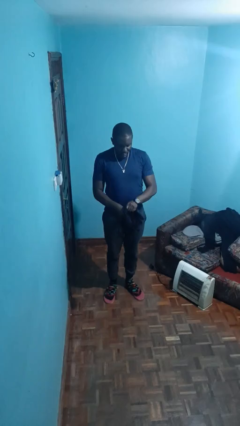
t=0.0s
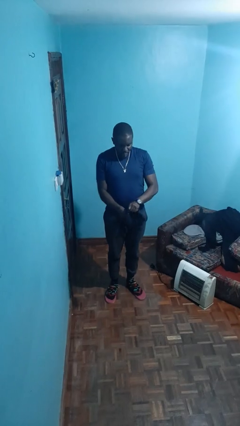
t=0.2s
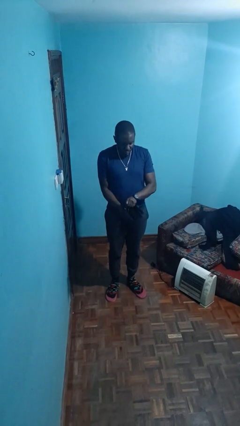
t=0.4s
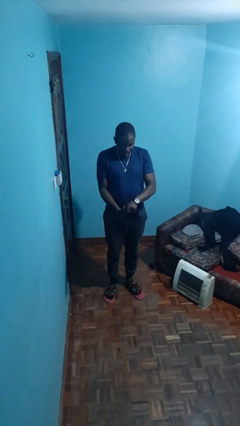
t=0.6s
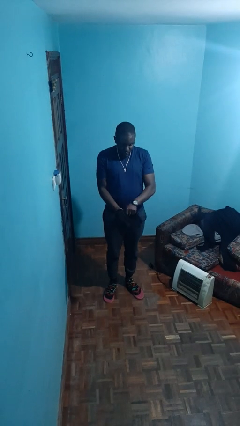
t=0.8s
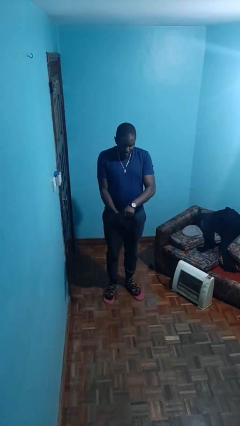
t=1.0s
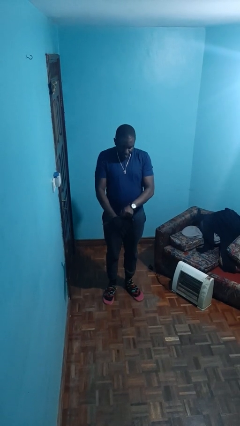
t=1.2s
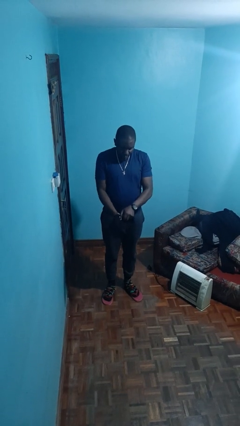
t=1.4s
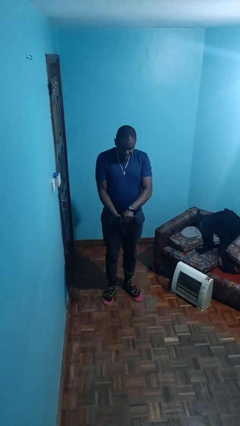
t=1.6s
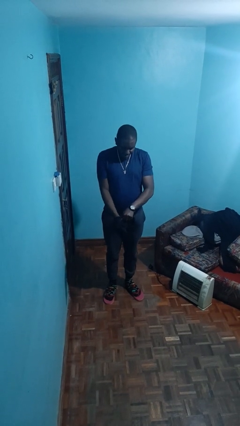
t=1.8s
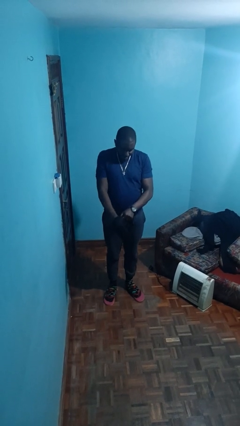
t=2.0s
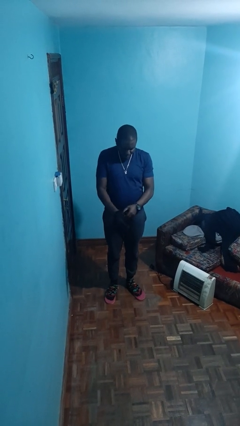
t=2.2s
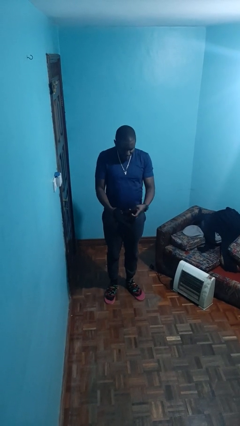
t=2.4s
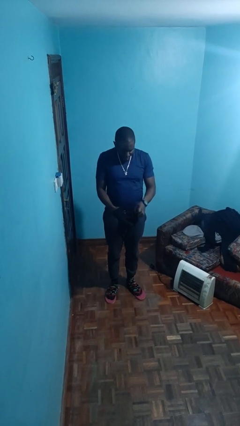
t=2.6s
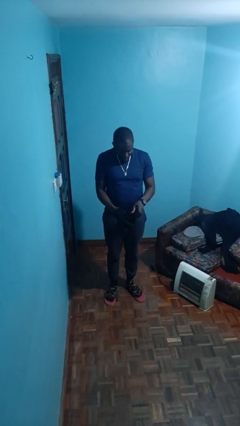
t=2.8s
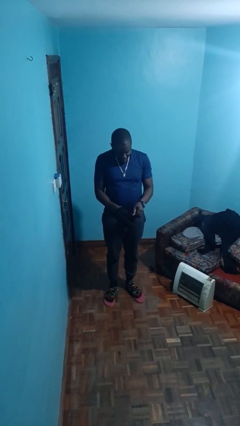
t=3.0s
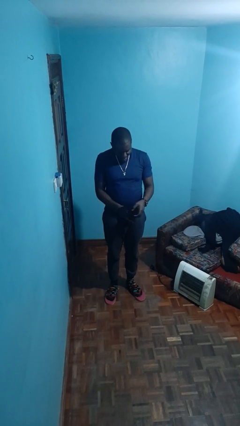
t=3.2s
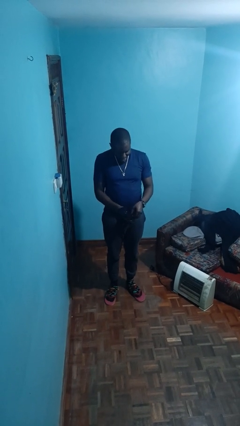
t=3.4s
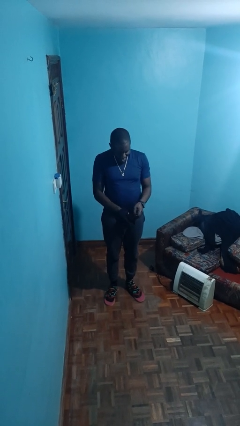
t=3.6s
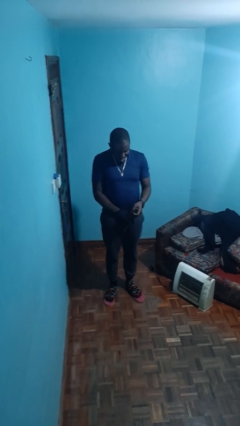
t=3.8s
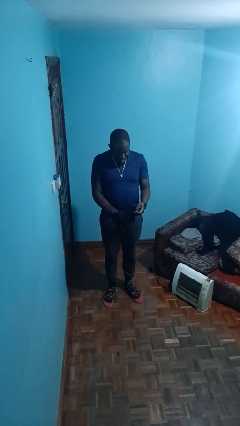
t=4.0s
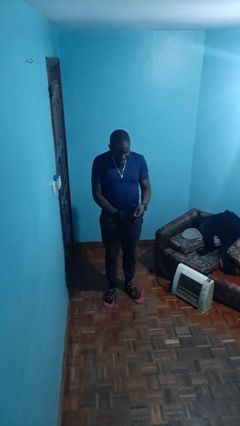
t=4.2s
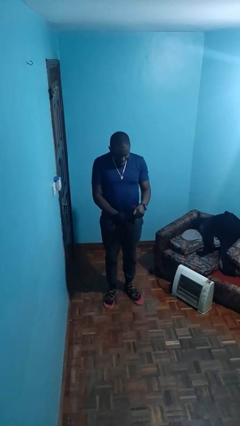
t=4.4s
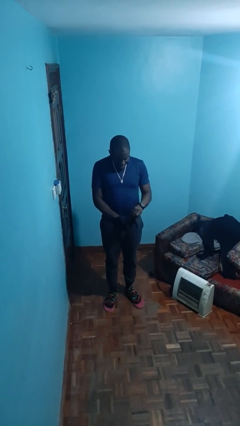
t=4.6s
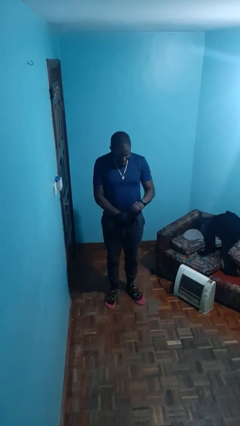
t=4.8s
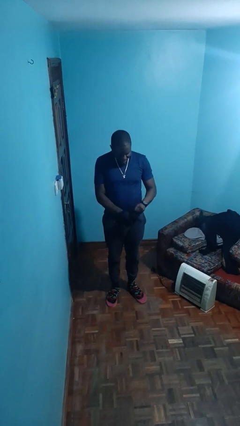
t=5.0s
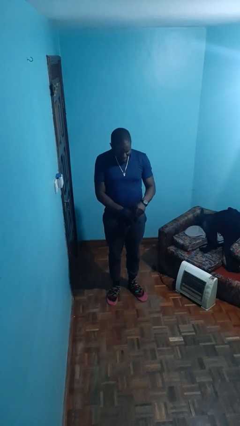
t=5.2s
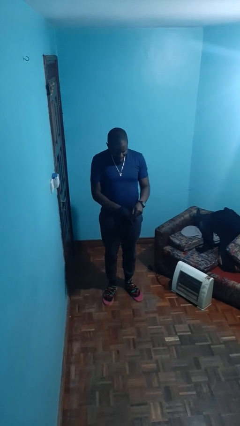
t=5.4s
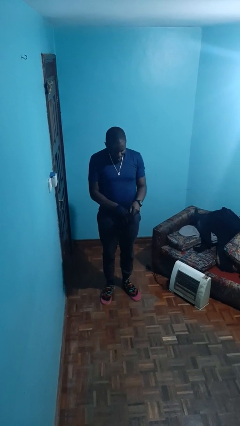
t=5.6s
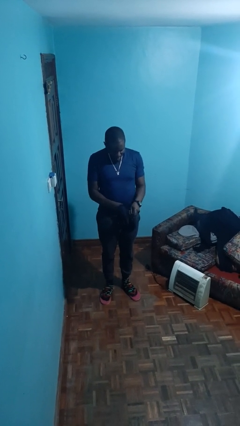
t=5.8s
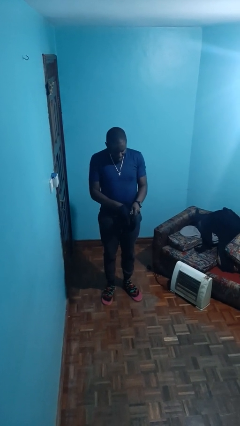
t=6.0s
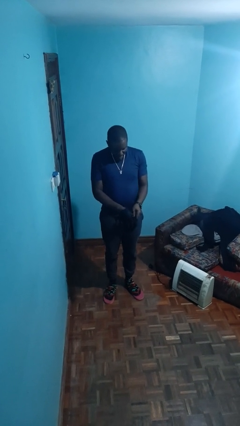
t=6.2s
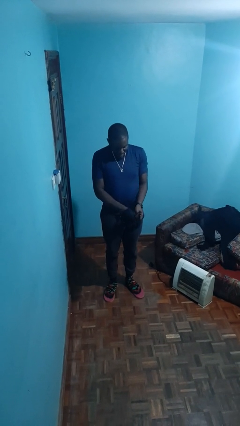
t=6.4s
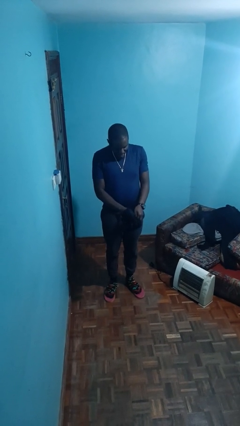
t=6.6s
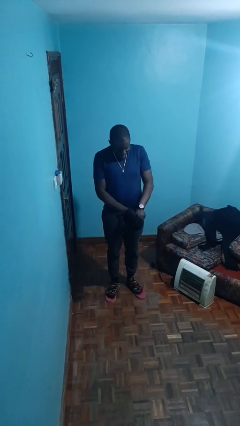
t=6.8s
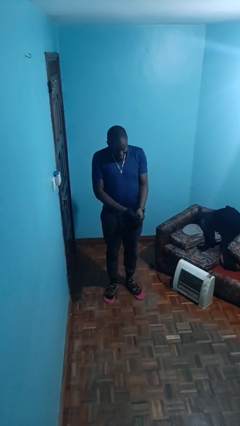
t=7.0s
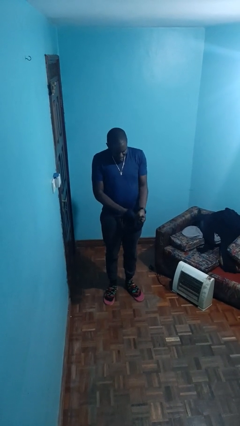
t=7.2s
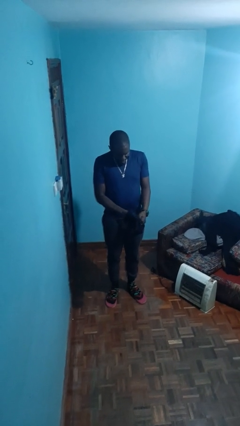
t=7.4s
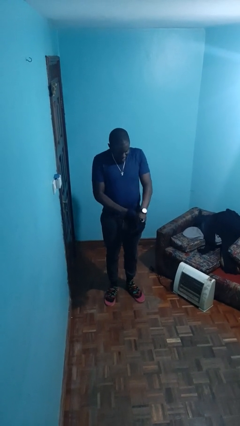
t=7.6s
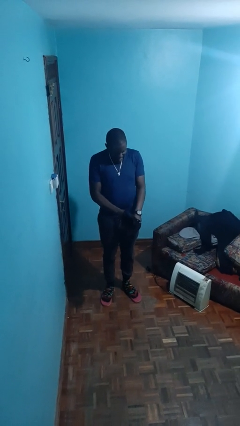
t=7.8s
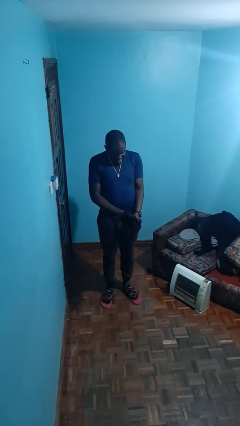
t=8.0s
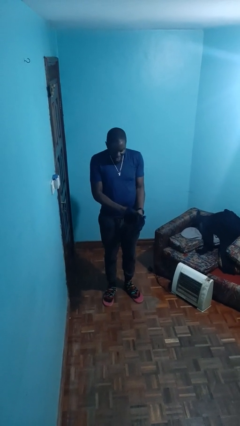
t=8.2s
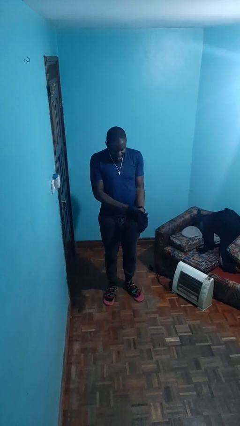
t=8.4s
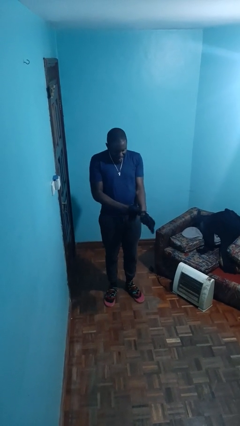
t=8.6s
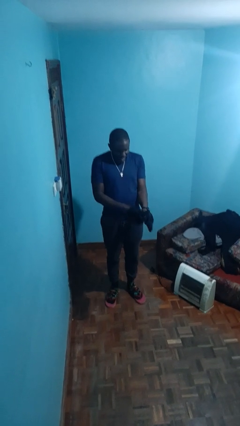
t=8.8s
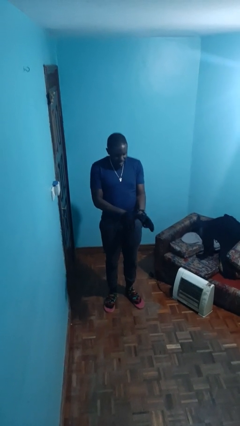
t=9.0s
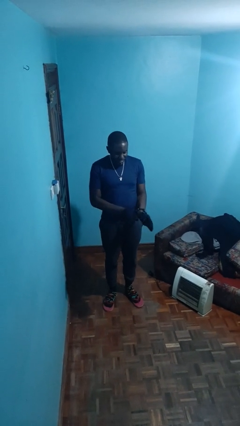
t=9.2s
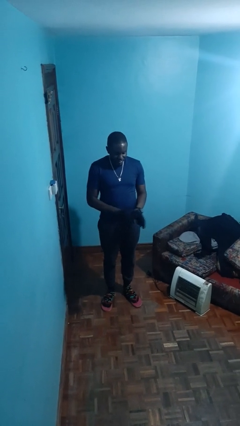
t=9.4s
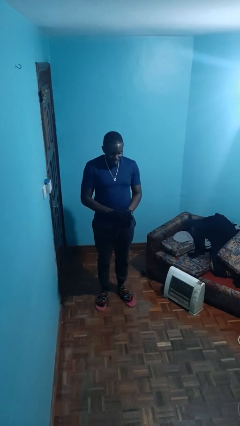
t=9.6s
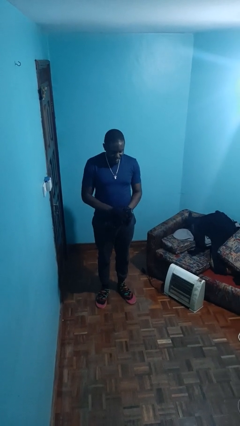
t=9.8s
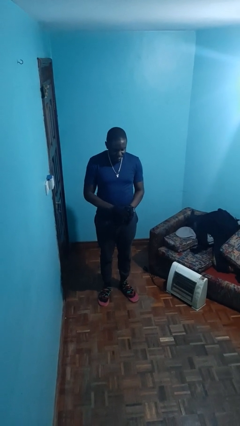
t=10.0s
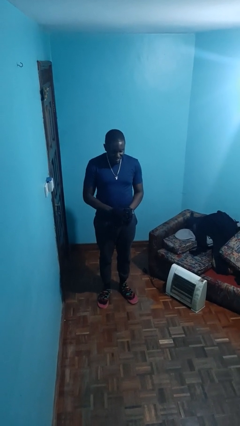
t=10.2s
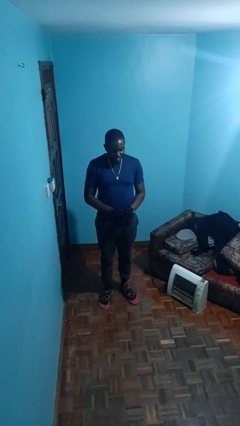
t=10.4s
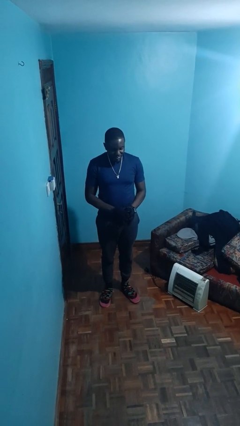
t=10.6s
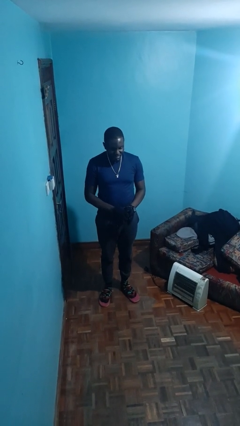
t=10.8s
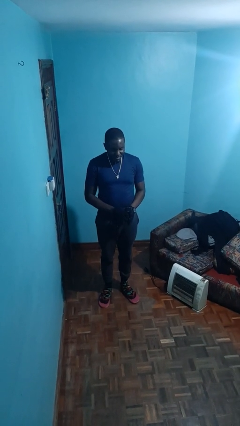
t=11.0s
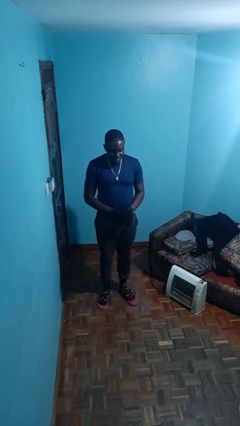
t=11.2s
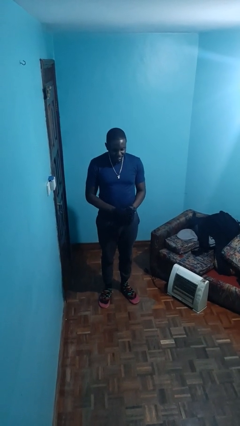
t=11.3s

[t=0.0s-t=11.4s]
person puts on gloves

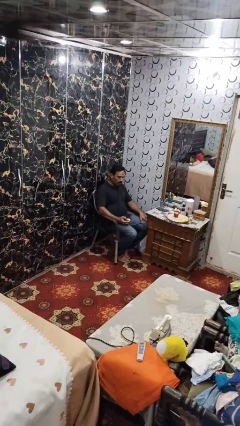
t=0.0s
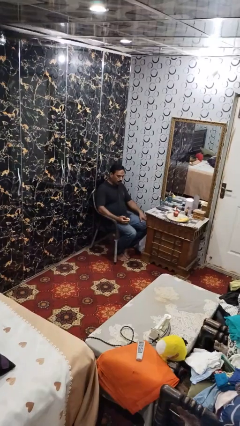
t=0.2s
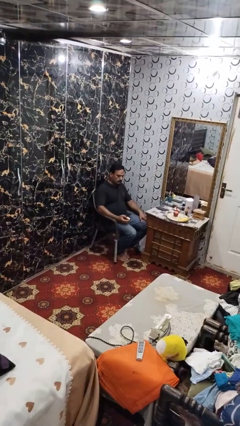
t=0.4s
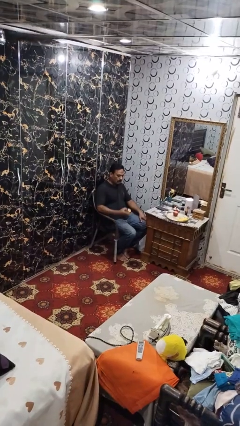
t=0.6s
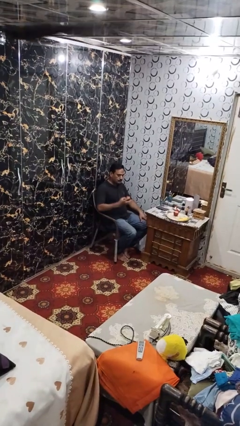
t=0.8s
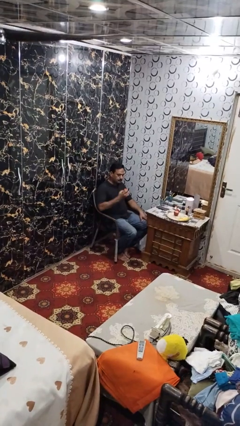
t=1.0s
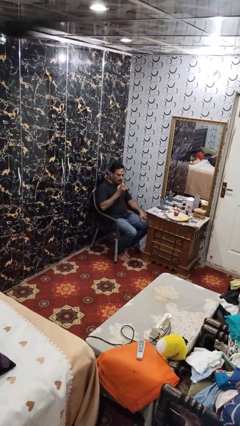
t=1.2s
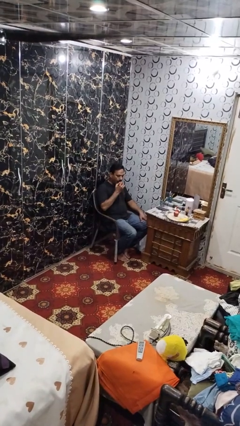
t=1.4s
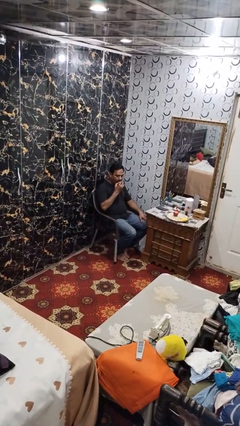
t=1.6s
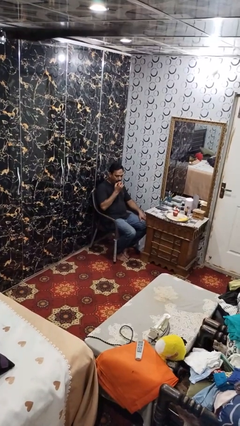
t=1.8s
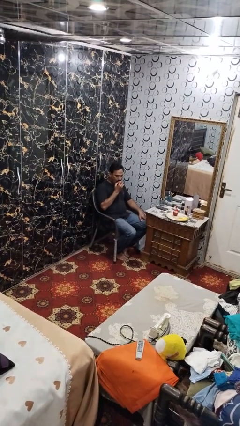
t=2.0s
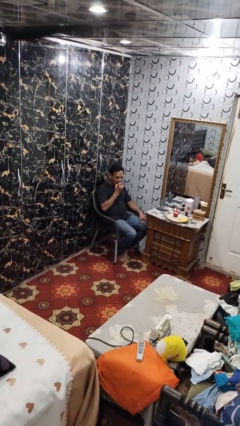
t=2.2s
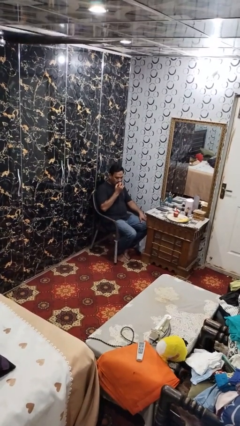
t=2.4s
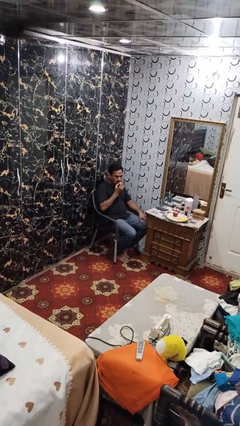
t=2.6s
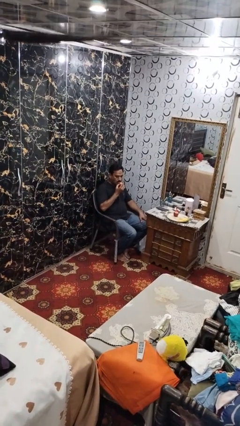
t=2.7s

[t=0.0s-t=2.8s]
person eats apple

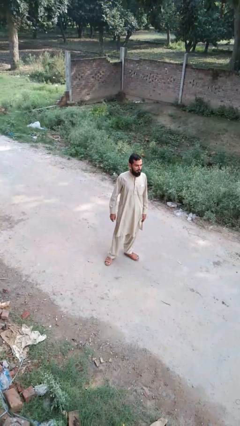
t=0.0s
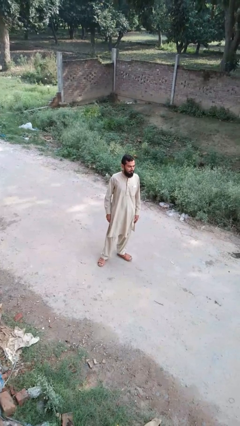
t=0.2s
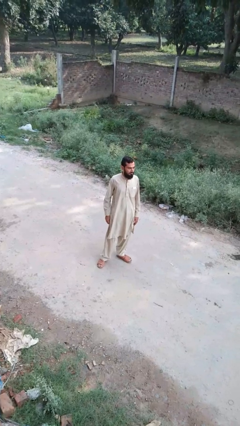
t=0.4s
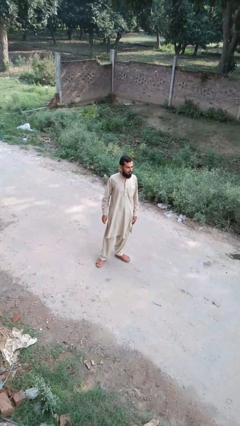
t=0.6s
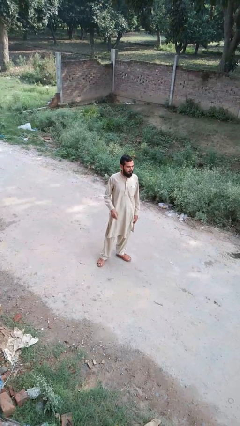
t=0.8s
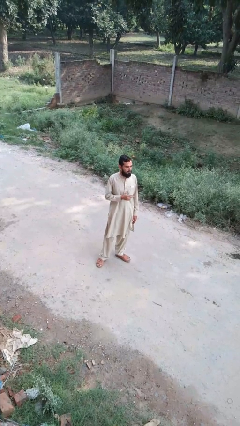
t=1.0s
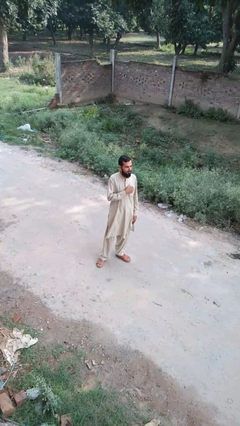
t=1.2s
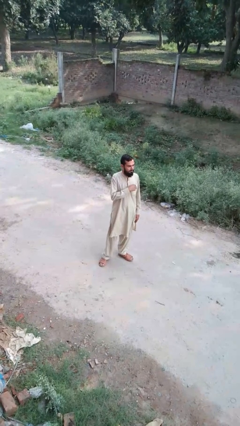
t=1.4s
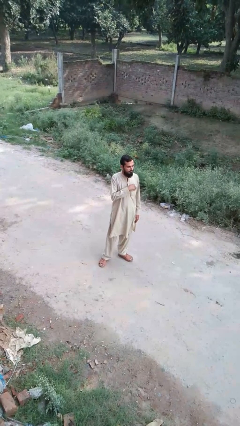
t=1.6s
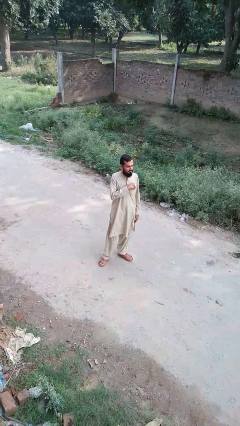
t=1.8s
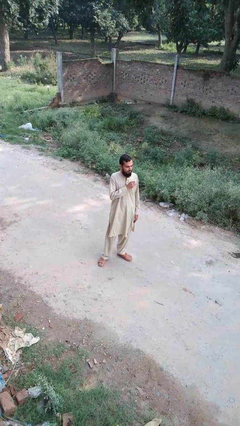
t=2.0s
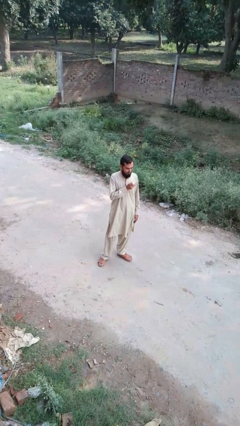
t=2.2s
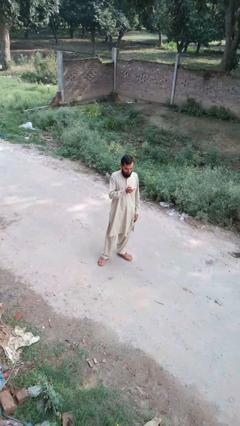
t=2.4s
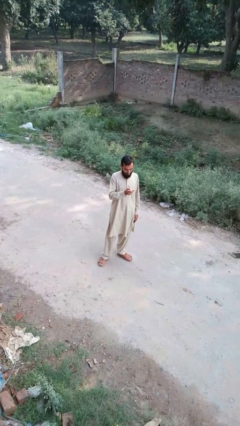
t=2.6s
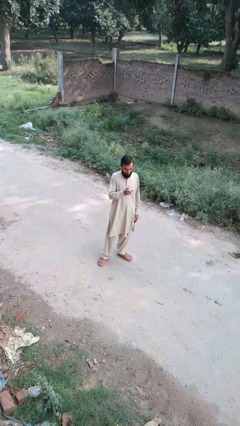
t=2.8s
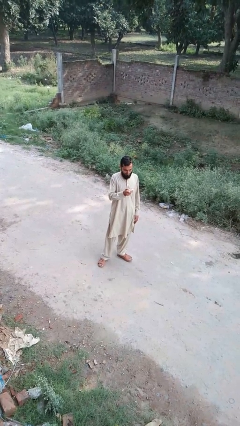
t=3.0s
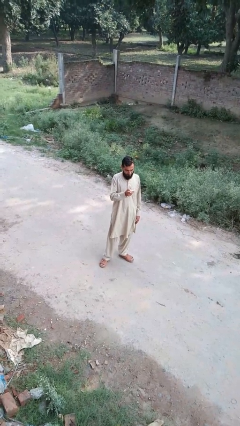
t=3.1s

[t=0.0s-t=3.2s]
person takes phone from pocket

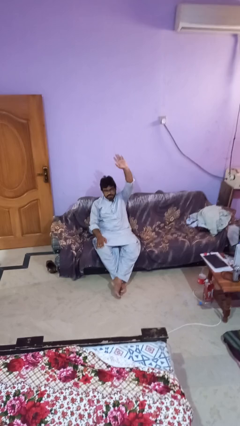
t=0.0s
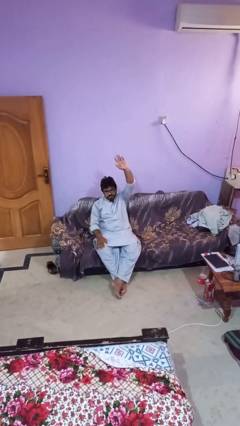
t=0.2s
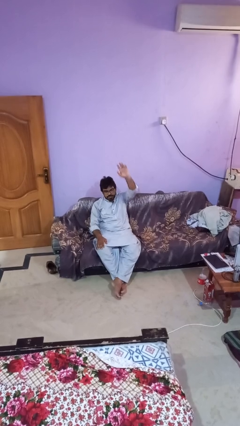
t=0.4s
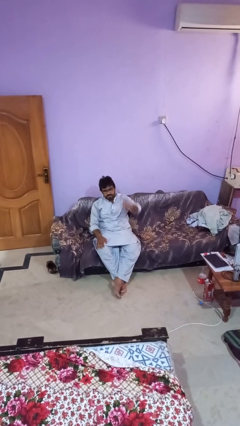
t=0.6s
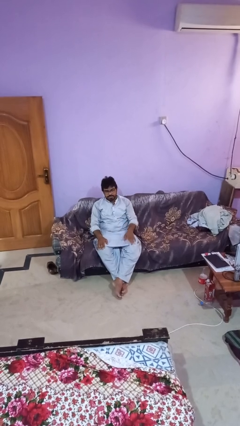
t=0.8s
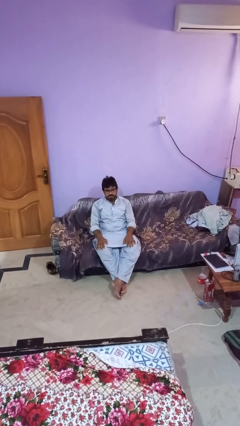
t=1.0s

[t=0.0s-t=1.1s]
person gestures lower hand
